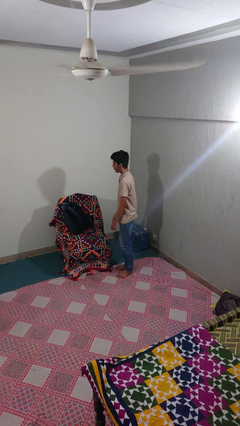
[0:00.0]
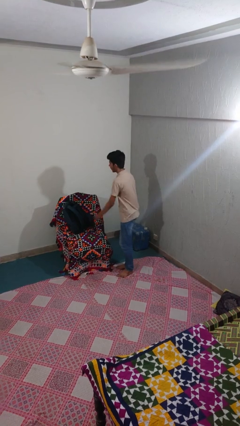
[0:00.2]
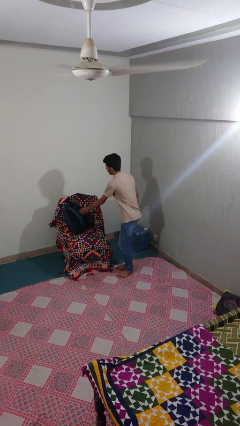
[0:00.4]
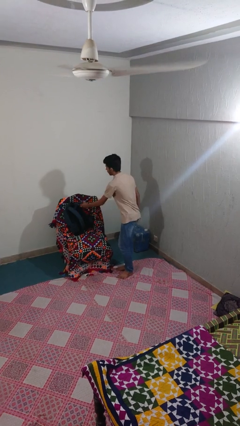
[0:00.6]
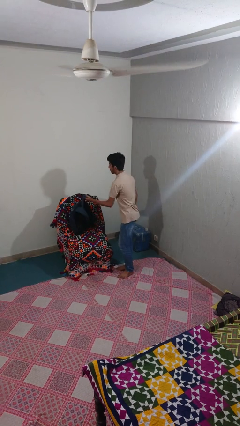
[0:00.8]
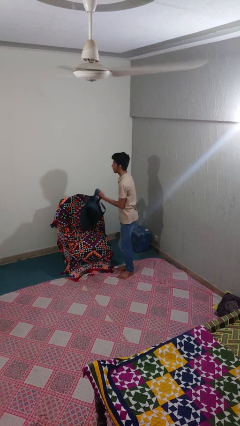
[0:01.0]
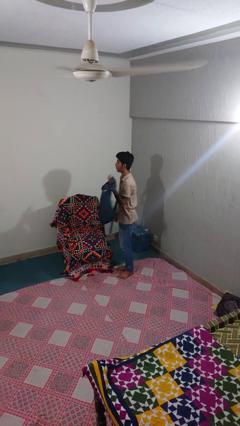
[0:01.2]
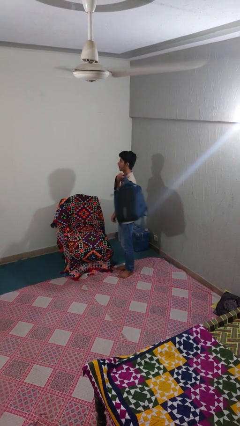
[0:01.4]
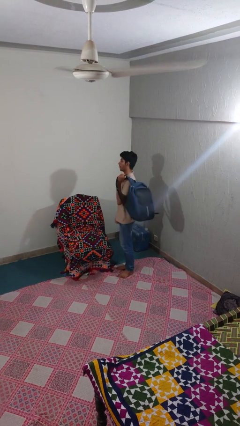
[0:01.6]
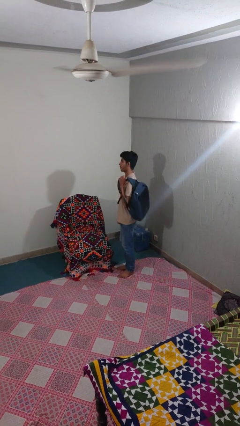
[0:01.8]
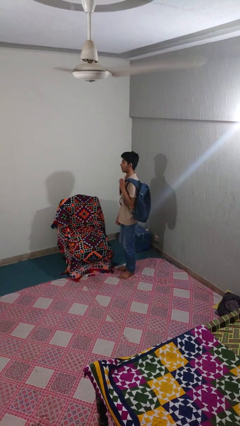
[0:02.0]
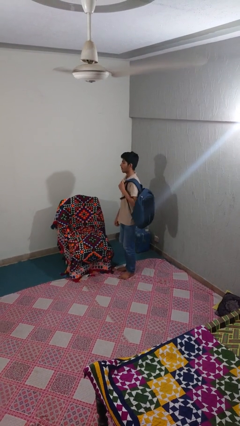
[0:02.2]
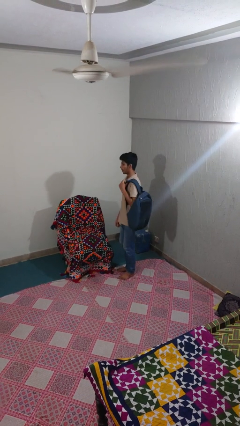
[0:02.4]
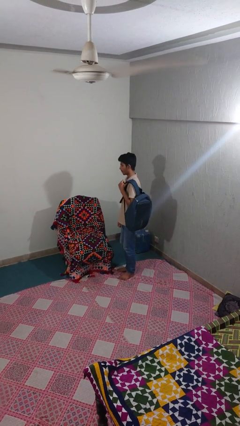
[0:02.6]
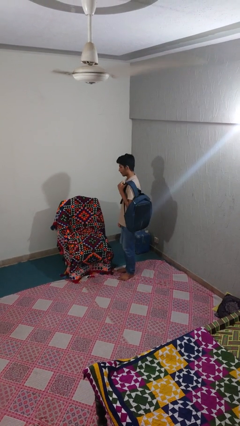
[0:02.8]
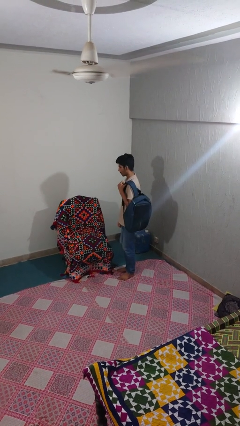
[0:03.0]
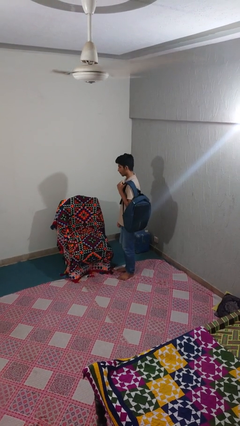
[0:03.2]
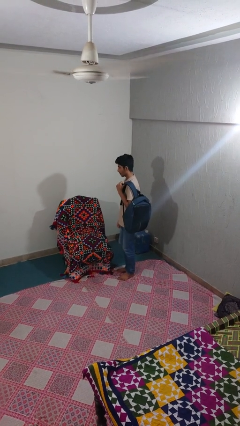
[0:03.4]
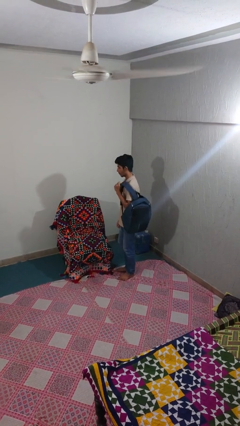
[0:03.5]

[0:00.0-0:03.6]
person picks up object from couch

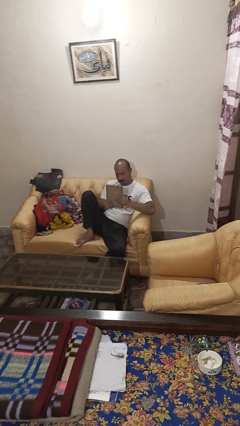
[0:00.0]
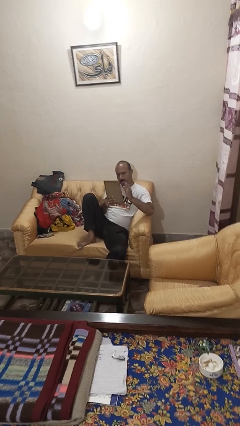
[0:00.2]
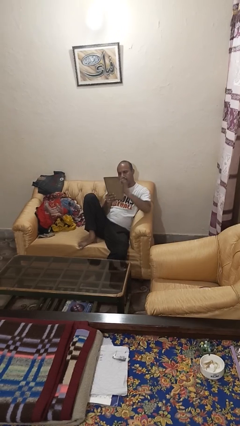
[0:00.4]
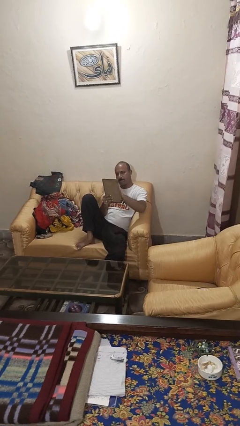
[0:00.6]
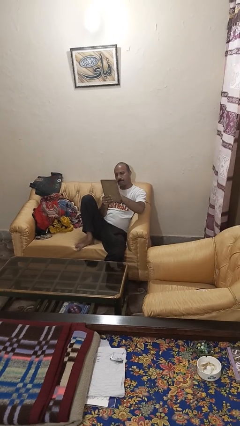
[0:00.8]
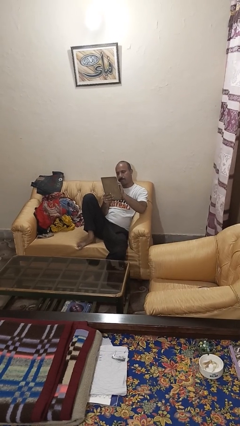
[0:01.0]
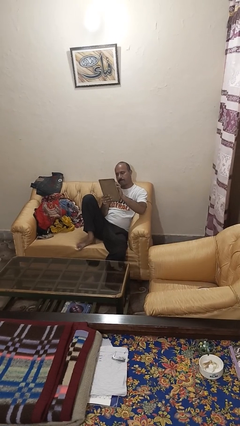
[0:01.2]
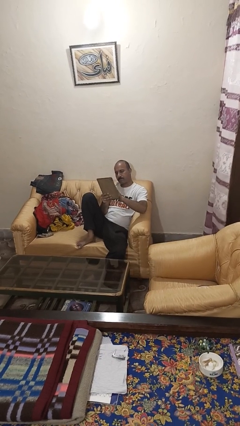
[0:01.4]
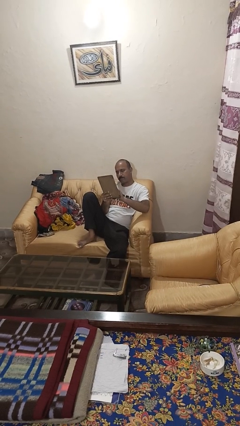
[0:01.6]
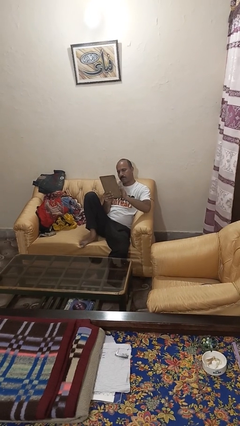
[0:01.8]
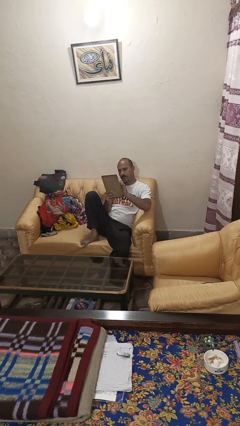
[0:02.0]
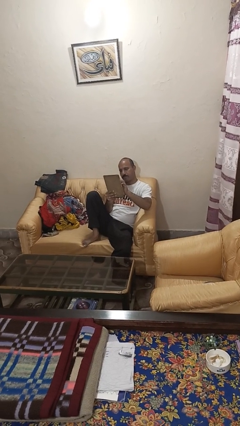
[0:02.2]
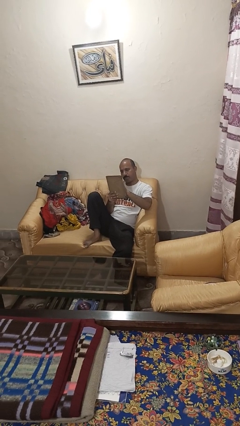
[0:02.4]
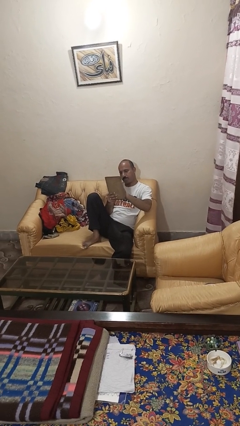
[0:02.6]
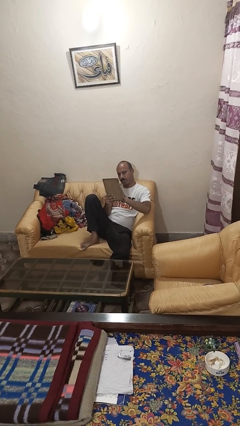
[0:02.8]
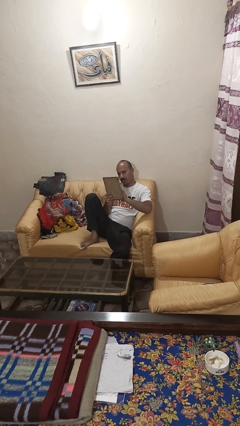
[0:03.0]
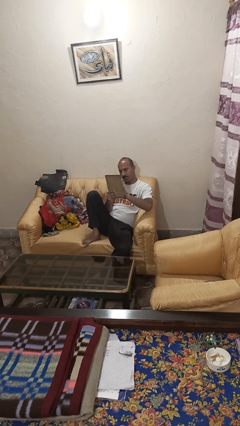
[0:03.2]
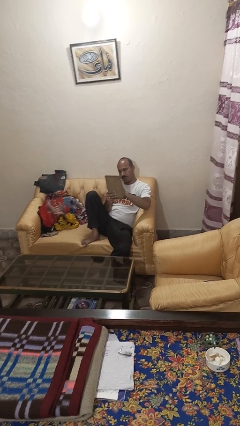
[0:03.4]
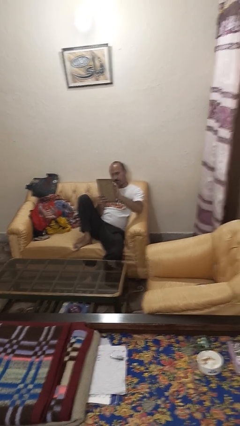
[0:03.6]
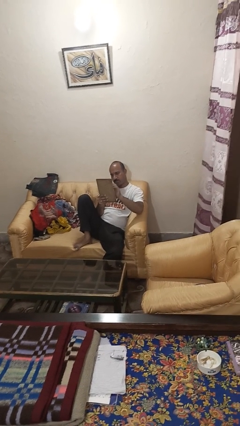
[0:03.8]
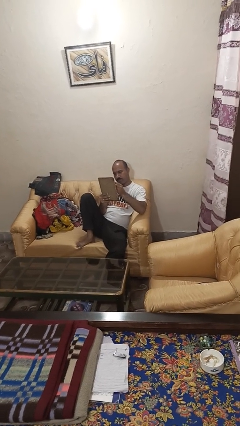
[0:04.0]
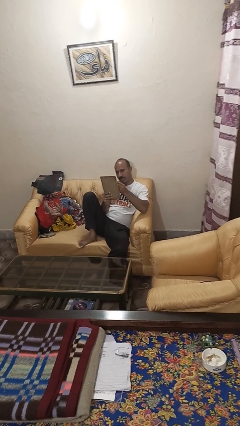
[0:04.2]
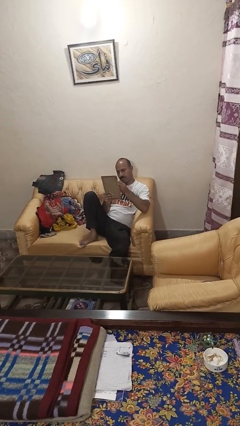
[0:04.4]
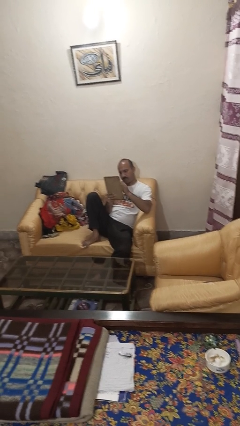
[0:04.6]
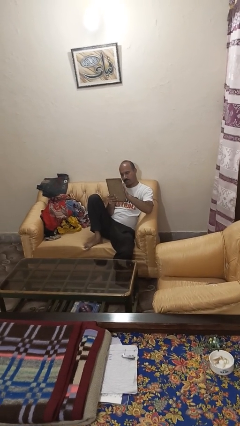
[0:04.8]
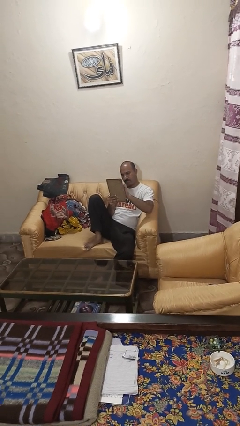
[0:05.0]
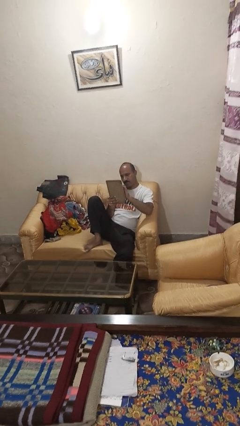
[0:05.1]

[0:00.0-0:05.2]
person interacts with tablet

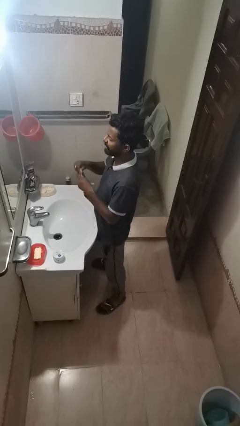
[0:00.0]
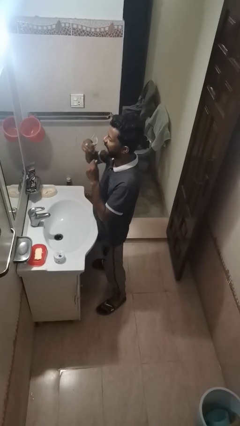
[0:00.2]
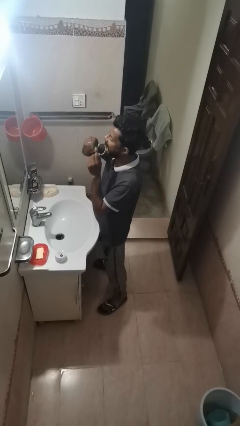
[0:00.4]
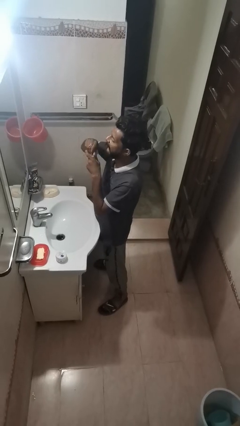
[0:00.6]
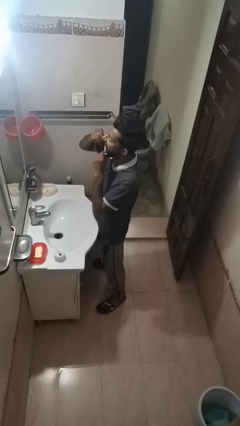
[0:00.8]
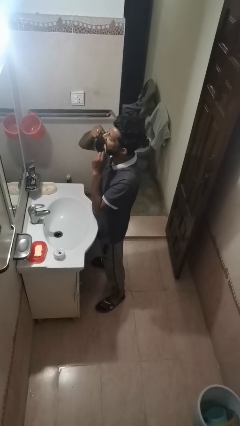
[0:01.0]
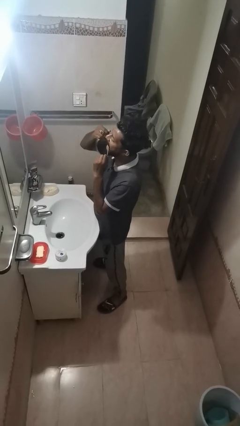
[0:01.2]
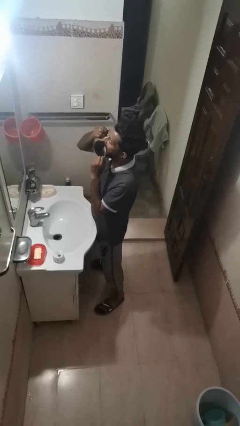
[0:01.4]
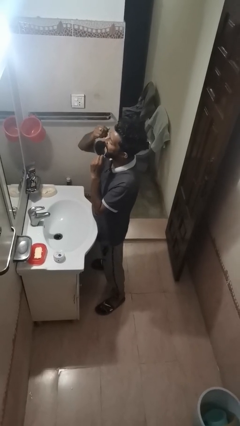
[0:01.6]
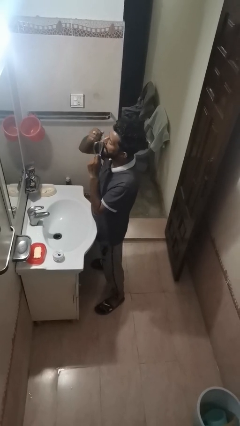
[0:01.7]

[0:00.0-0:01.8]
person flosses

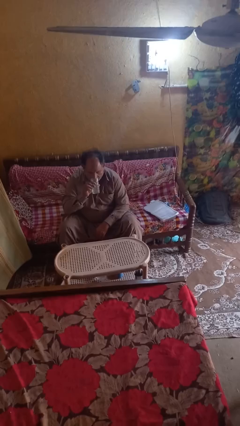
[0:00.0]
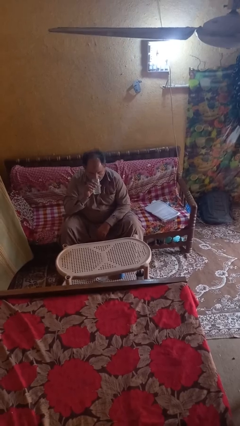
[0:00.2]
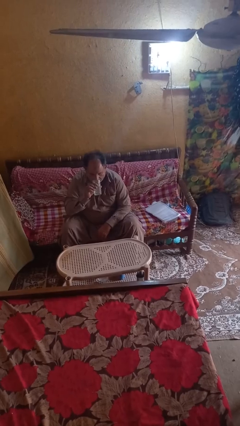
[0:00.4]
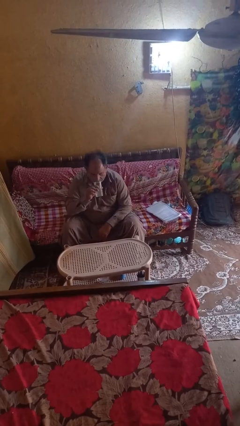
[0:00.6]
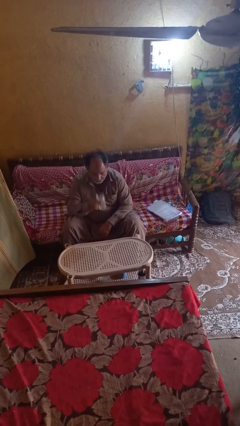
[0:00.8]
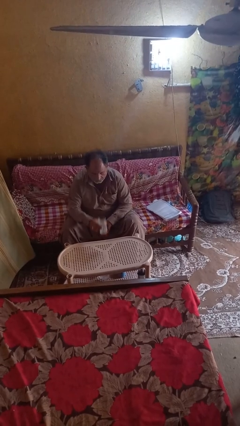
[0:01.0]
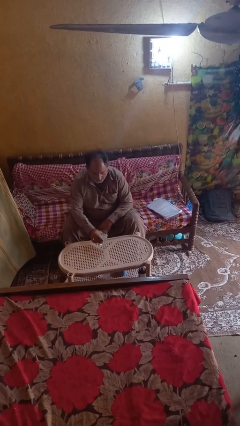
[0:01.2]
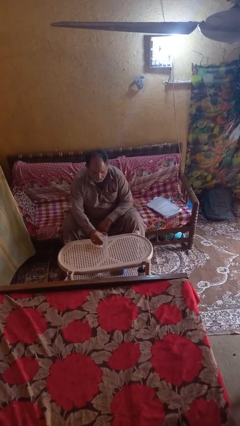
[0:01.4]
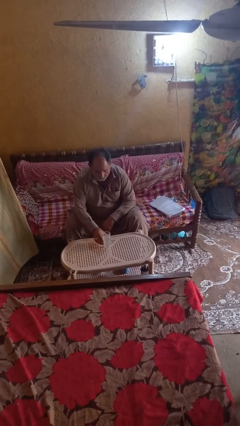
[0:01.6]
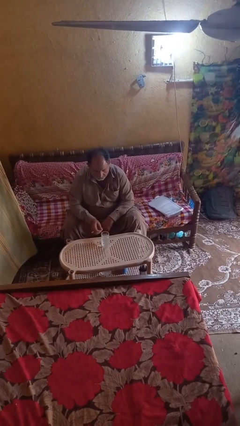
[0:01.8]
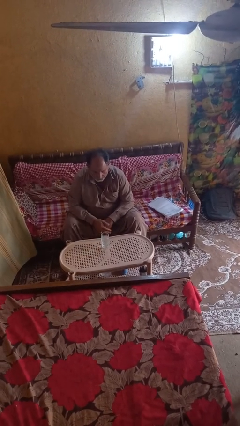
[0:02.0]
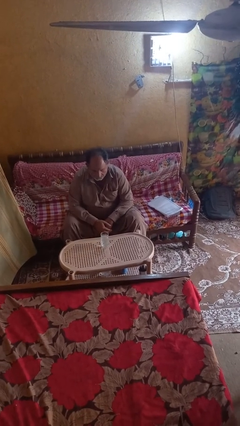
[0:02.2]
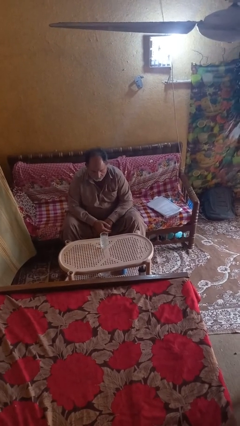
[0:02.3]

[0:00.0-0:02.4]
person puts down object on table

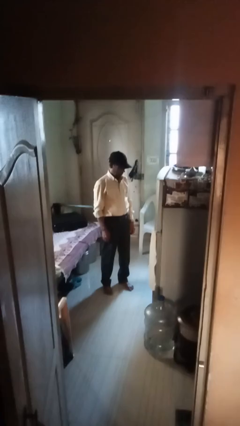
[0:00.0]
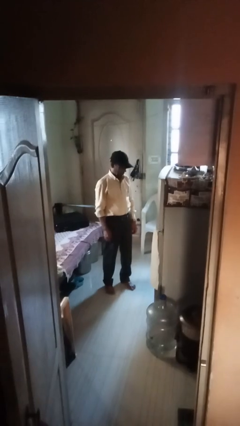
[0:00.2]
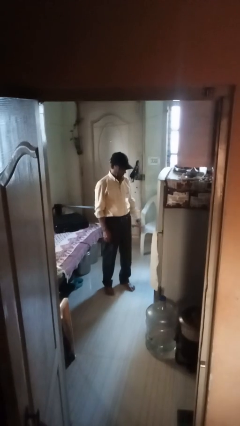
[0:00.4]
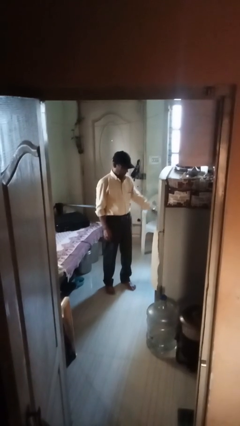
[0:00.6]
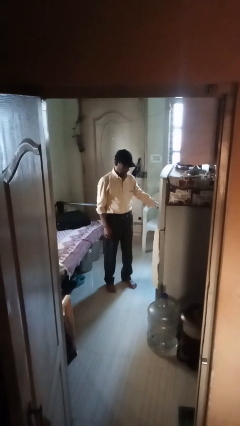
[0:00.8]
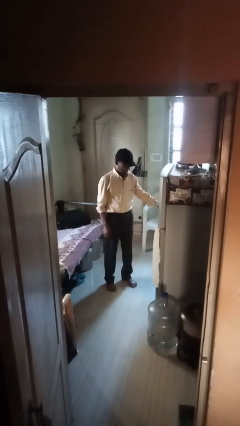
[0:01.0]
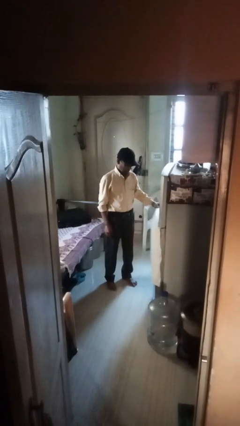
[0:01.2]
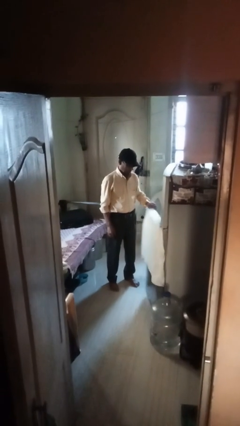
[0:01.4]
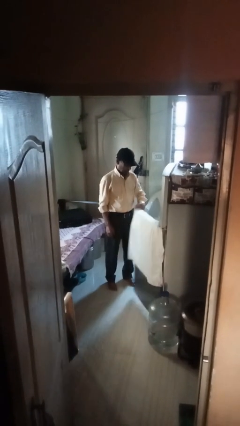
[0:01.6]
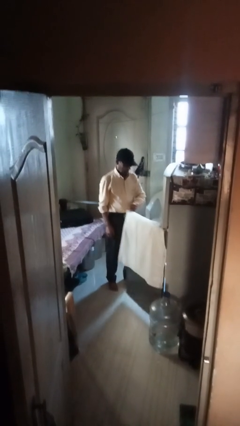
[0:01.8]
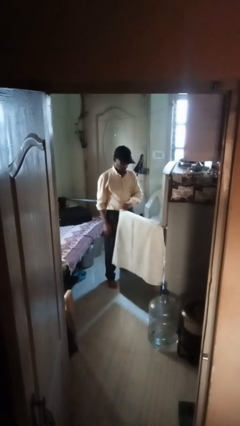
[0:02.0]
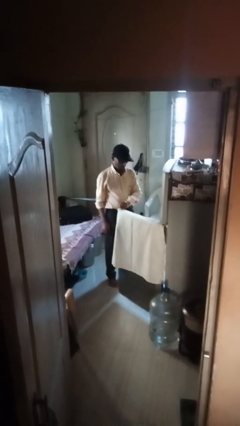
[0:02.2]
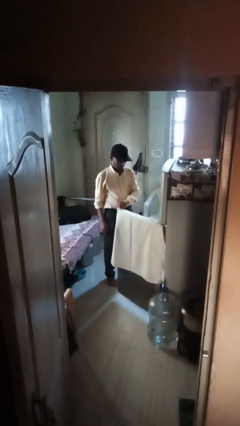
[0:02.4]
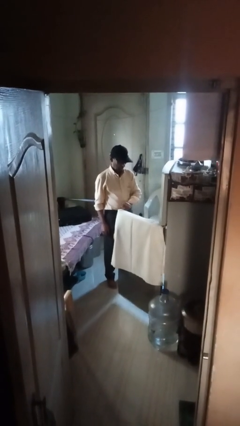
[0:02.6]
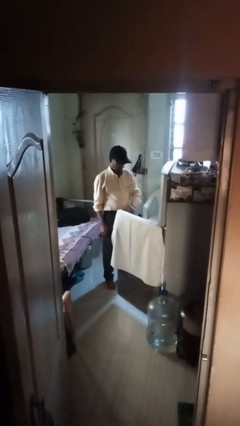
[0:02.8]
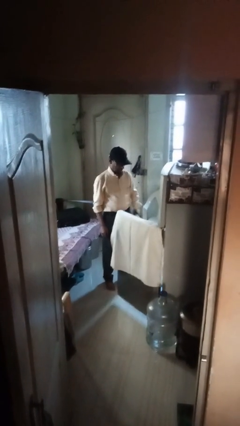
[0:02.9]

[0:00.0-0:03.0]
person opens clothes washer

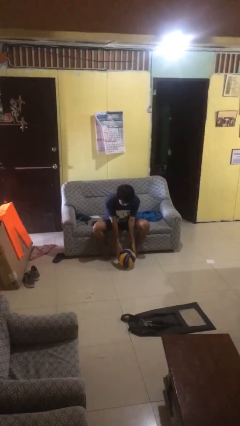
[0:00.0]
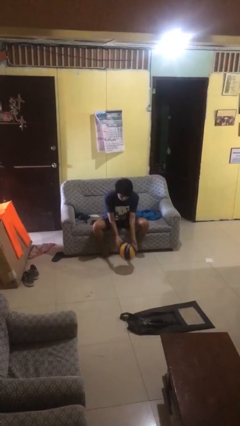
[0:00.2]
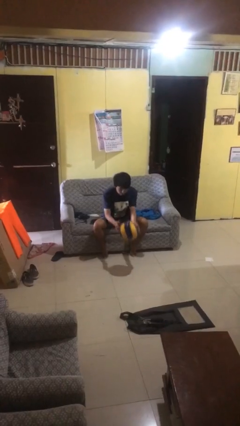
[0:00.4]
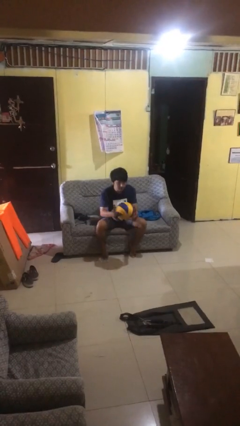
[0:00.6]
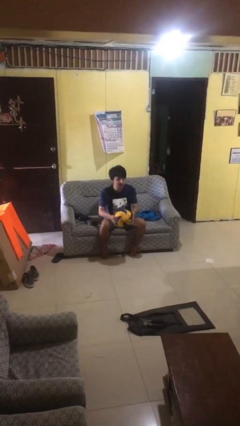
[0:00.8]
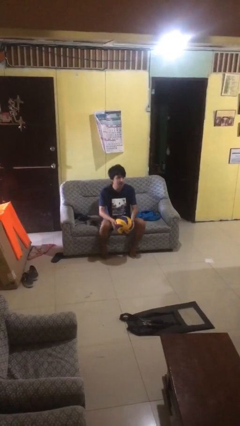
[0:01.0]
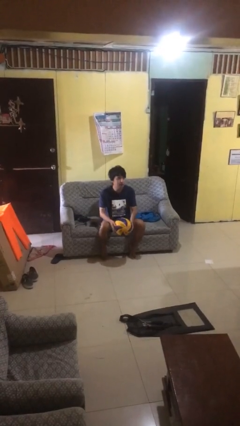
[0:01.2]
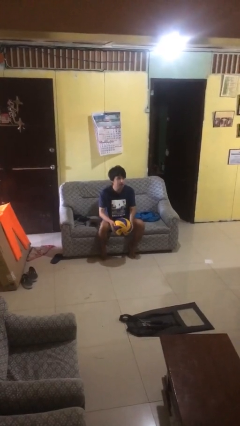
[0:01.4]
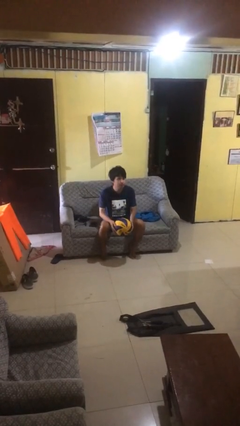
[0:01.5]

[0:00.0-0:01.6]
person picks up object from floor
